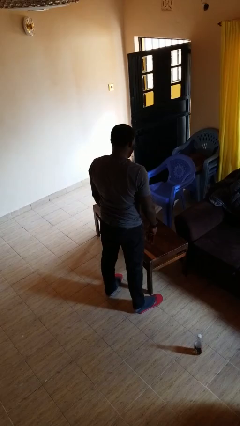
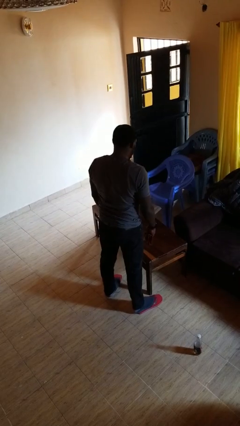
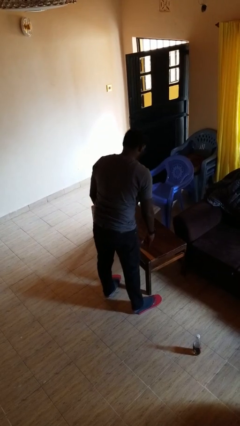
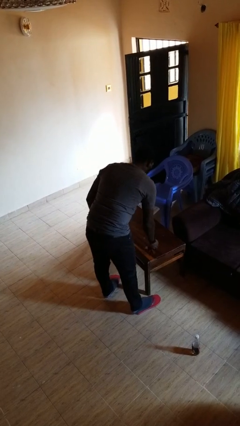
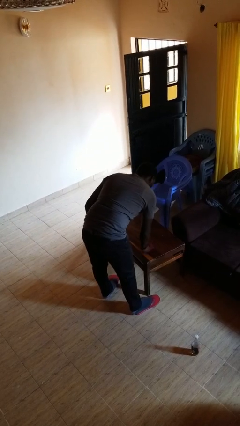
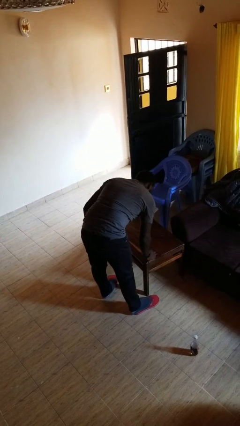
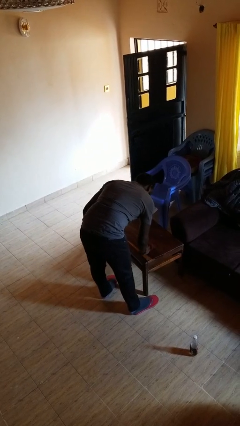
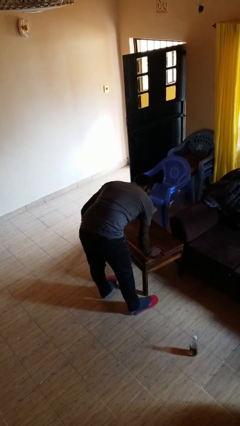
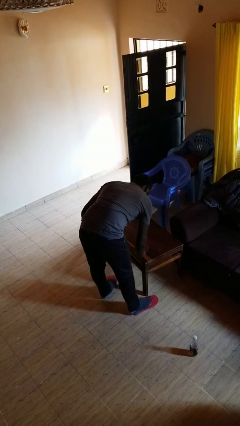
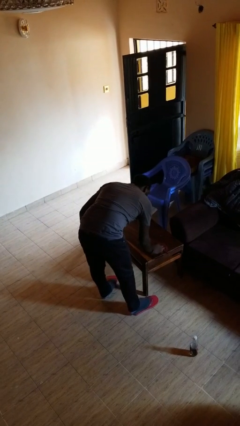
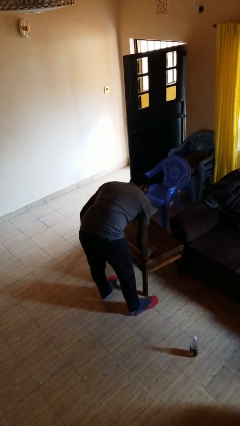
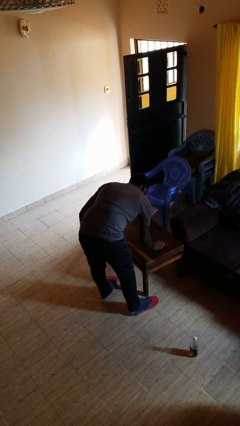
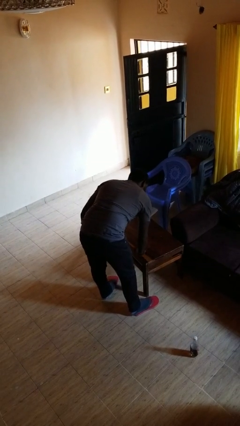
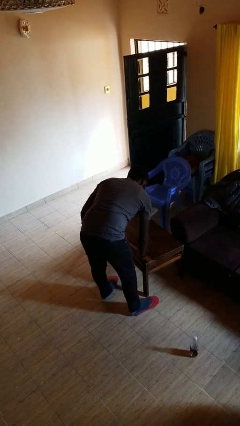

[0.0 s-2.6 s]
person cleans table with rag

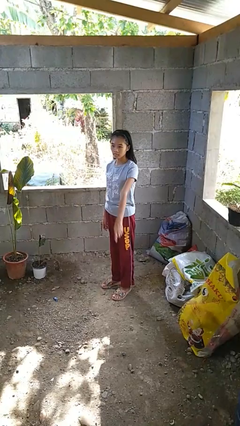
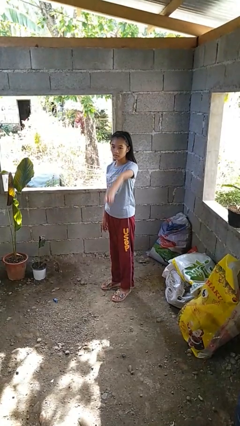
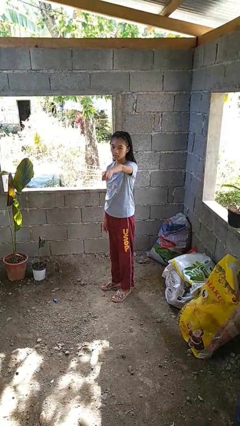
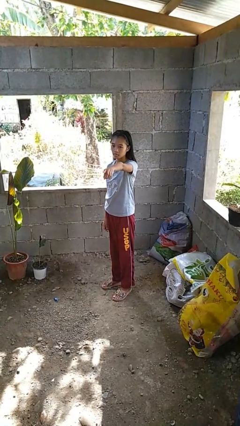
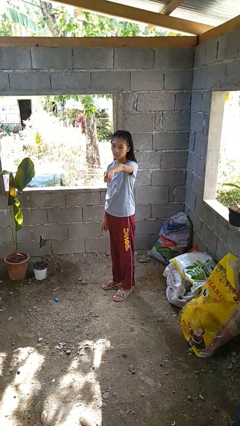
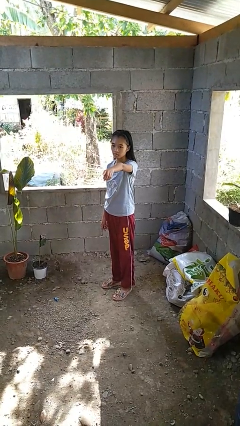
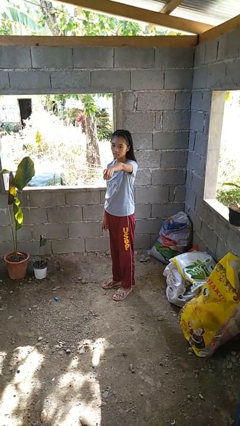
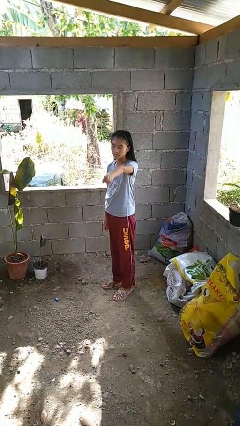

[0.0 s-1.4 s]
person points at person

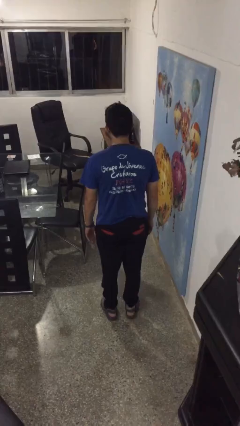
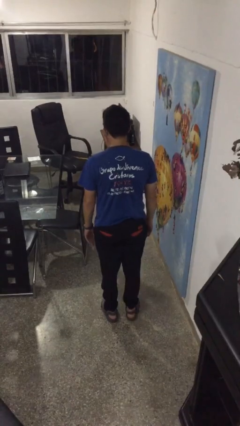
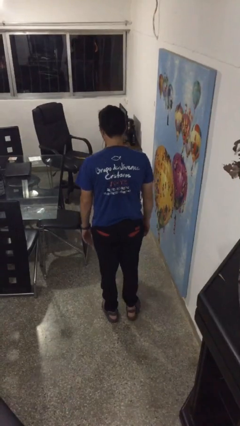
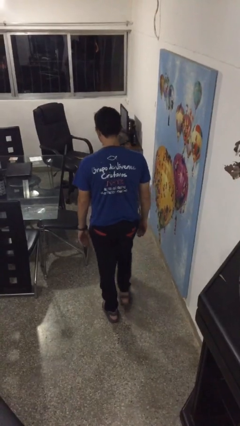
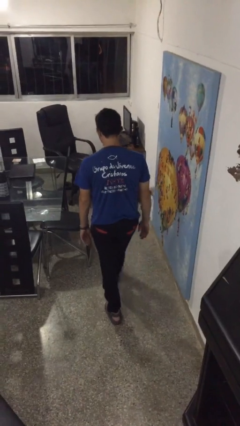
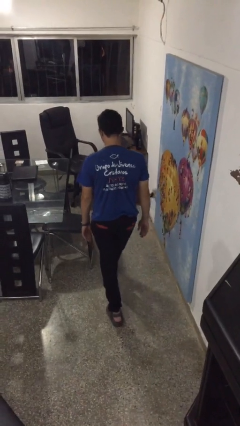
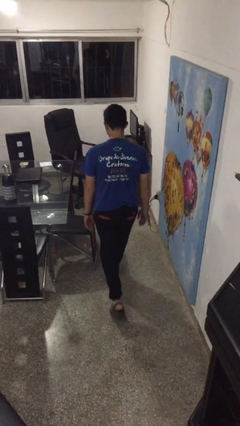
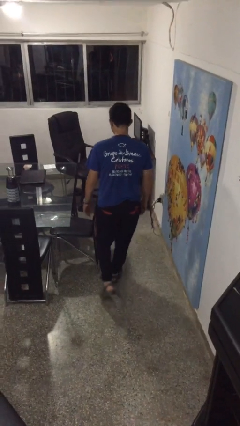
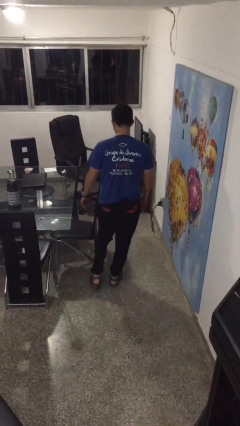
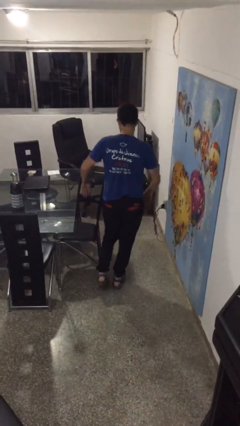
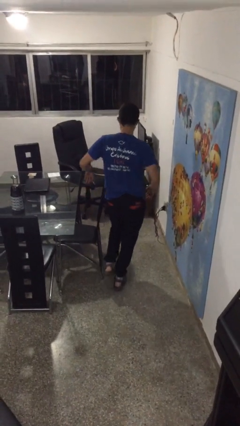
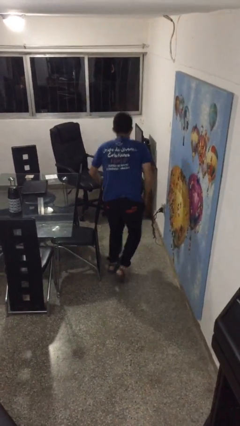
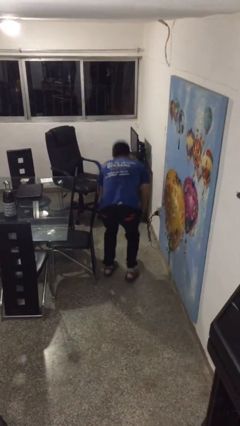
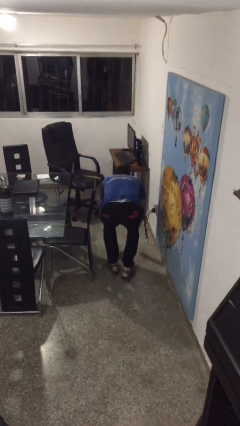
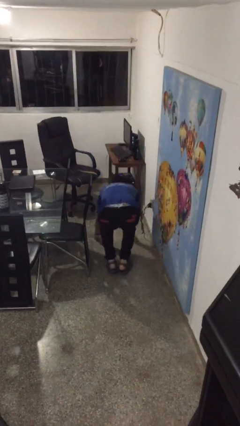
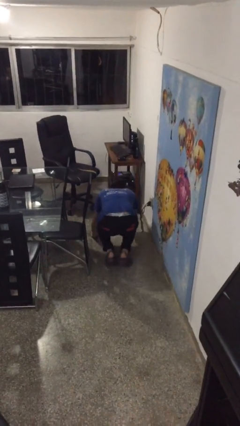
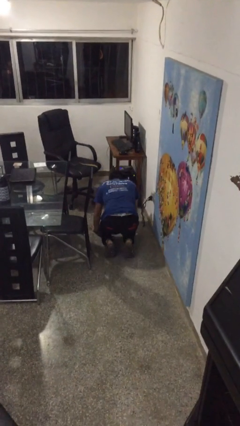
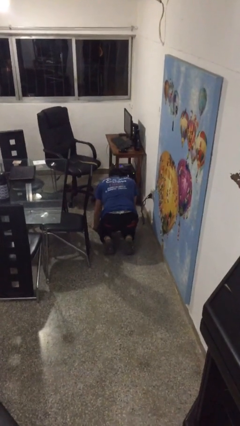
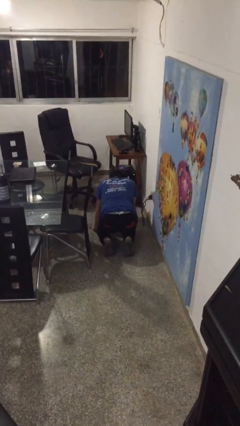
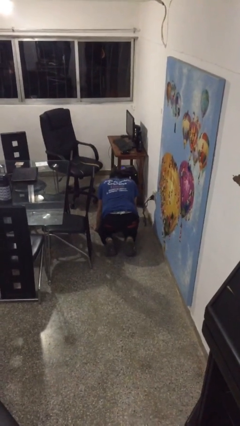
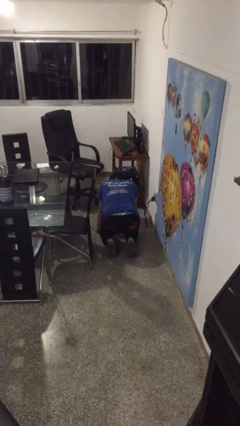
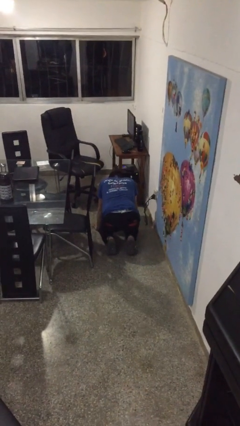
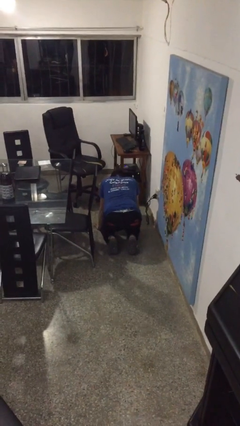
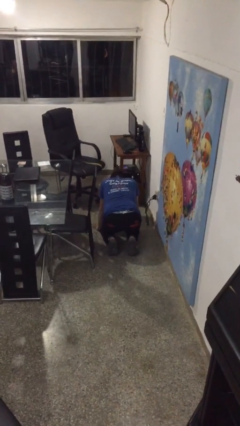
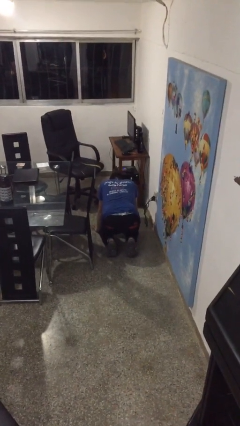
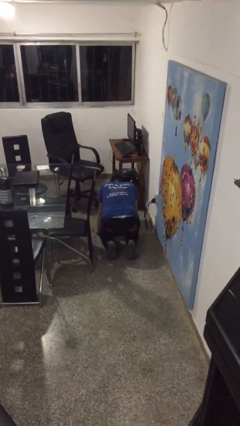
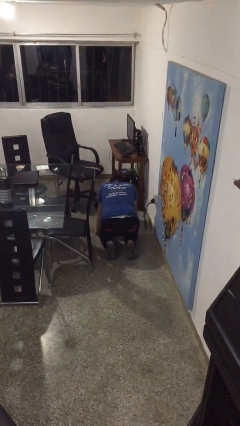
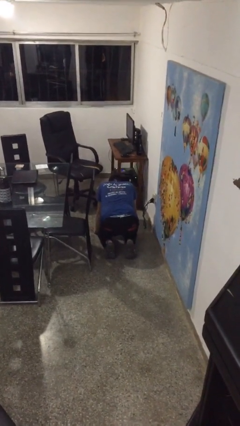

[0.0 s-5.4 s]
person trips on object on floor

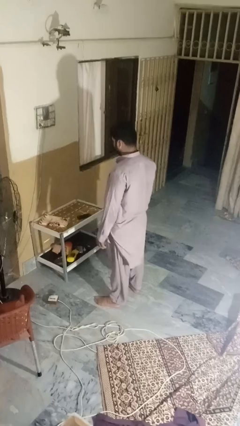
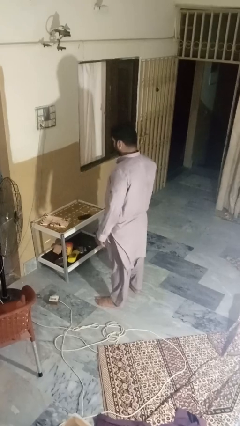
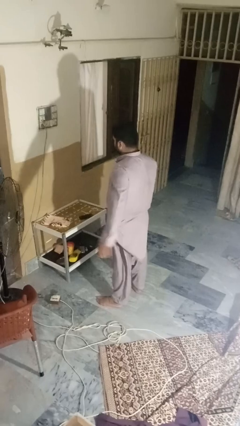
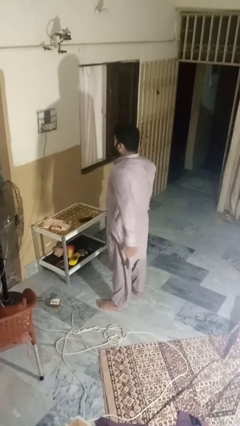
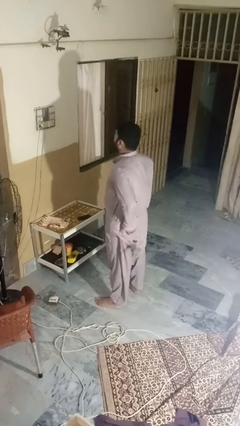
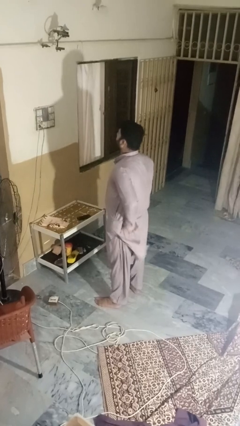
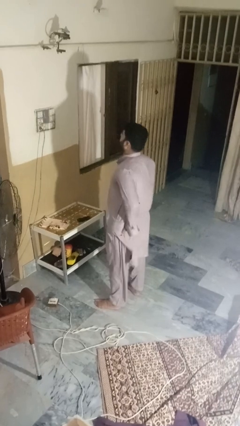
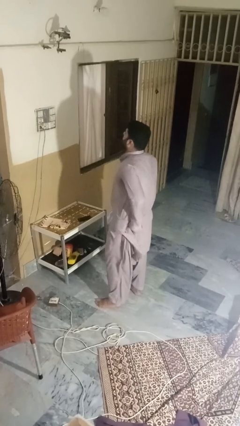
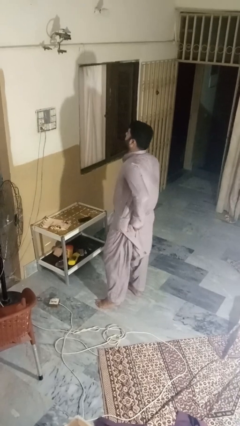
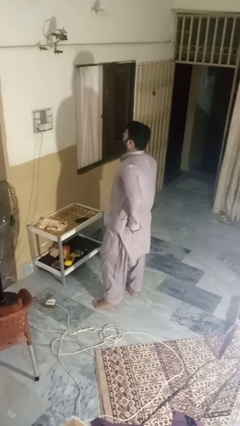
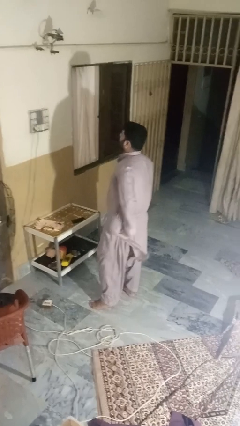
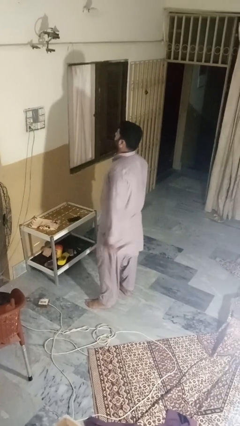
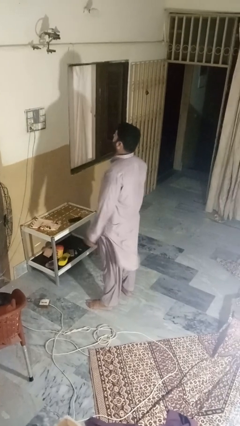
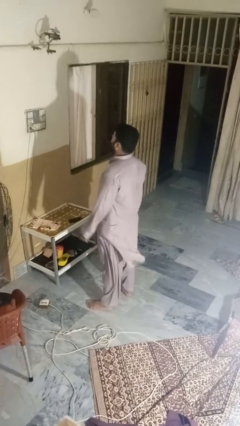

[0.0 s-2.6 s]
person wiggles hips

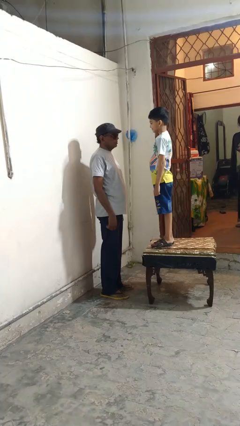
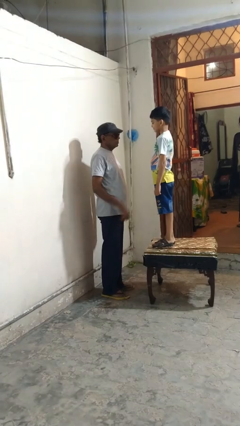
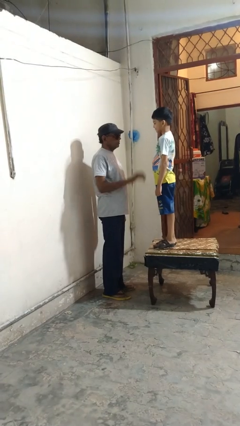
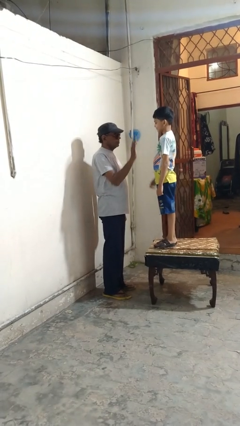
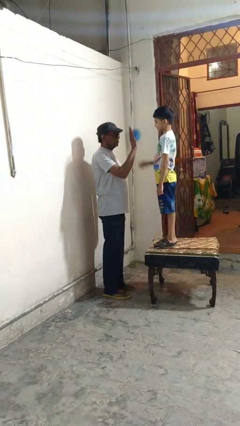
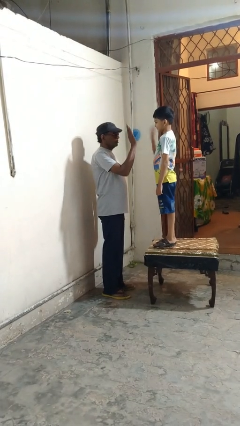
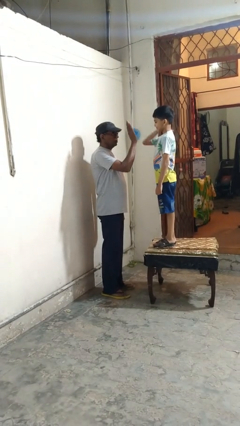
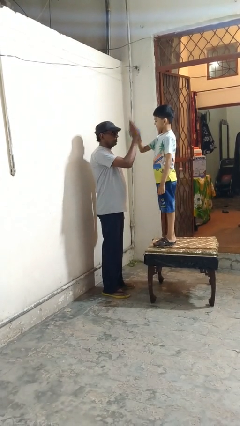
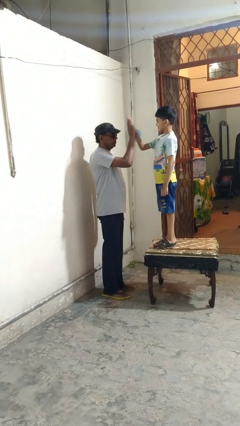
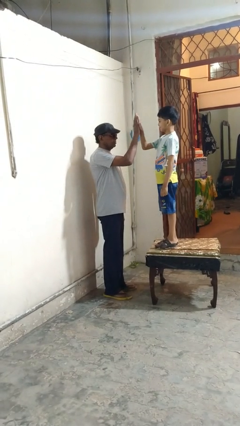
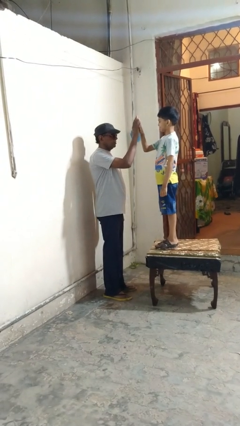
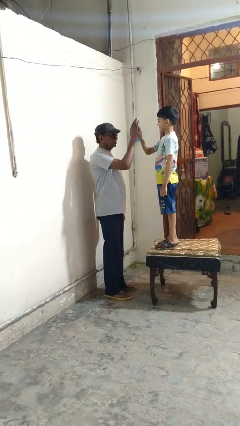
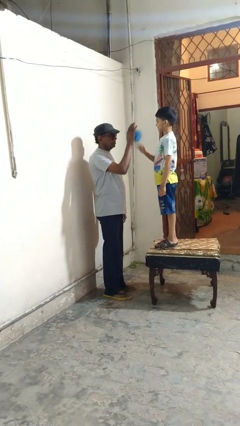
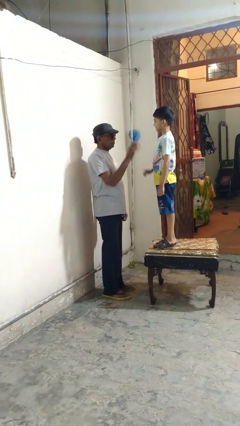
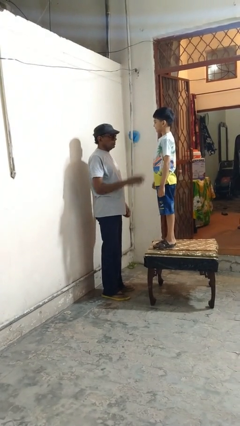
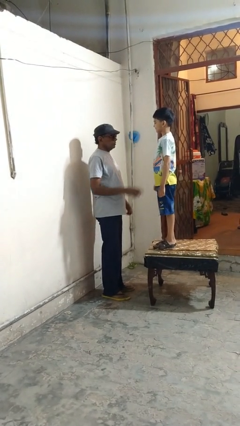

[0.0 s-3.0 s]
person highfives hand

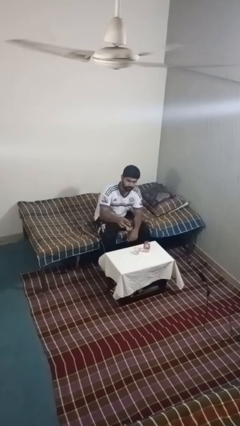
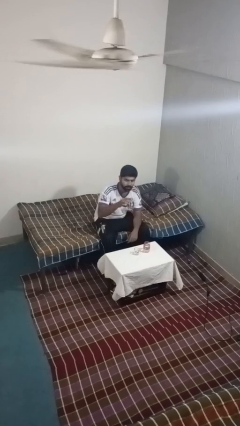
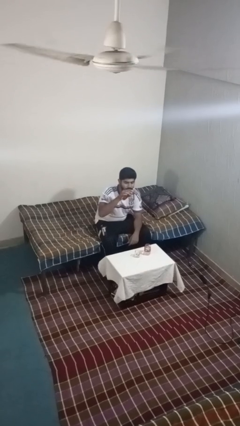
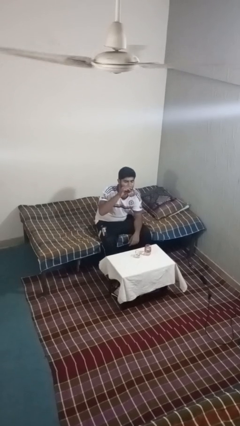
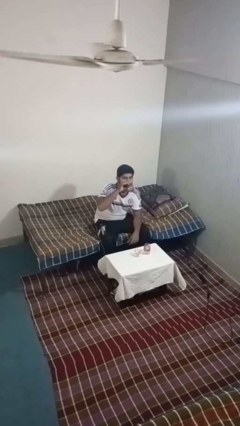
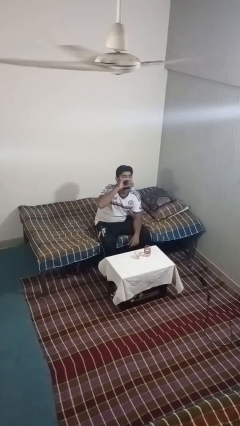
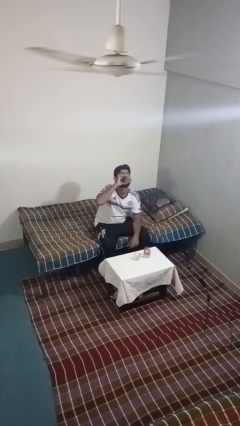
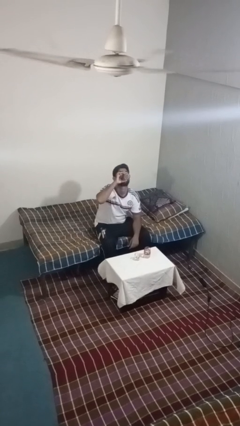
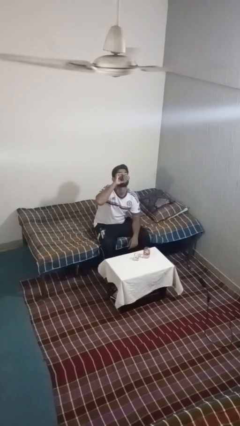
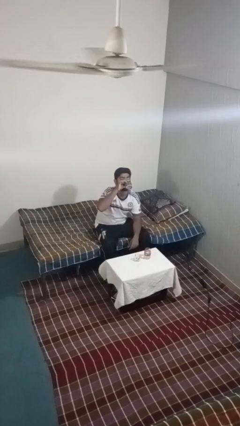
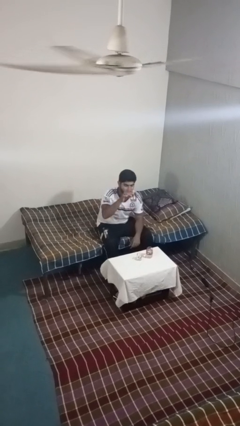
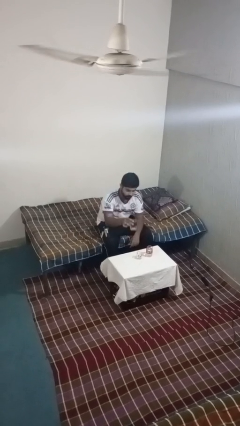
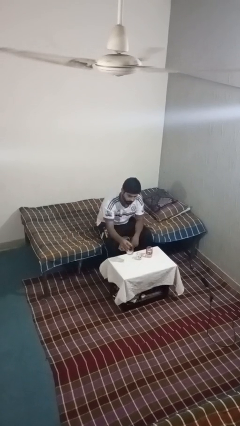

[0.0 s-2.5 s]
person drinks from shotglass

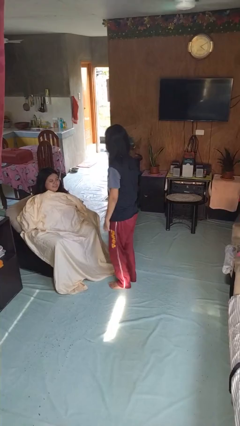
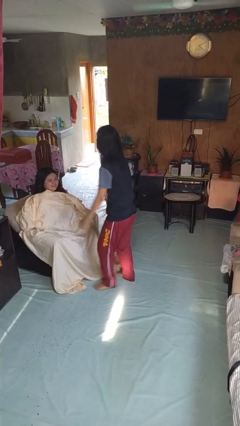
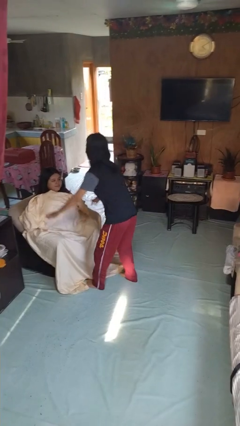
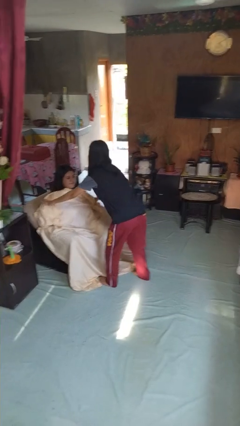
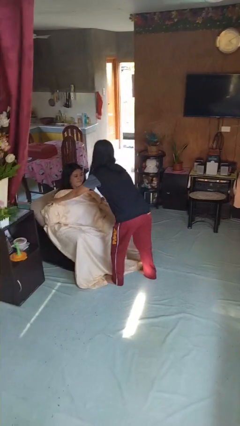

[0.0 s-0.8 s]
person uncovers friend with blanket
